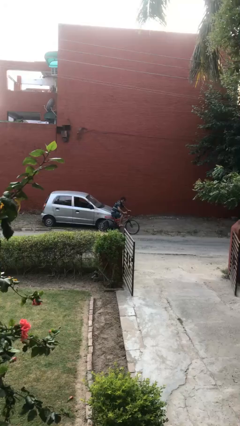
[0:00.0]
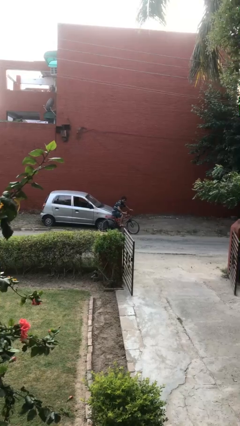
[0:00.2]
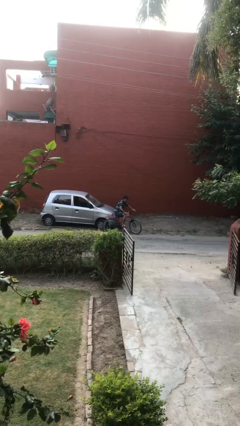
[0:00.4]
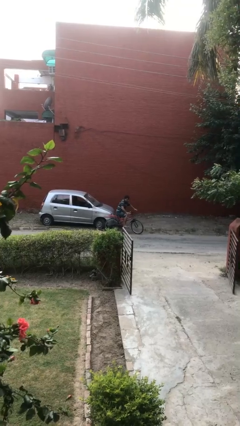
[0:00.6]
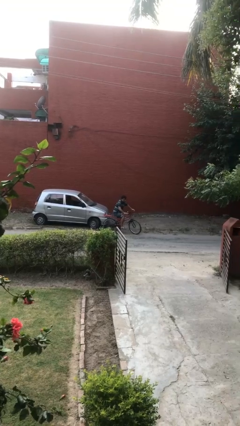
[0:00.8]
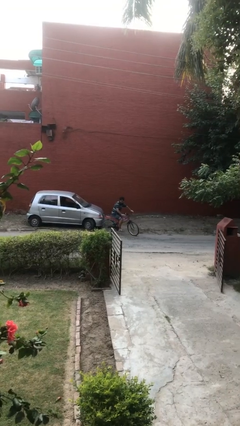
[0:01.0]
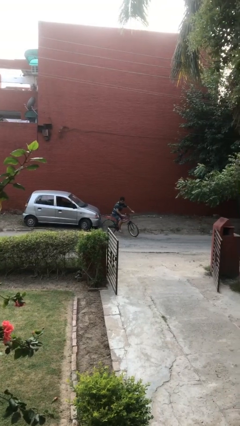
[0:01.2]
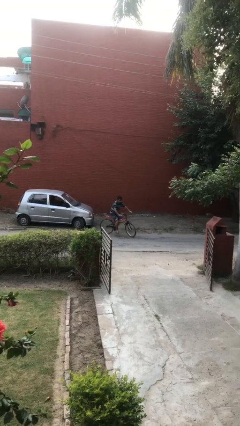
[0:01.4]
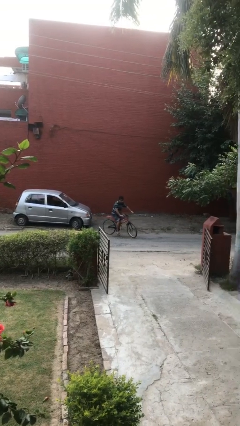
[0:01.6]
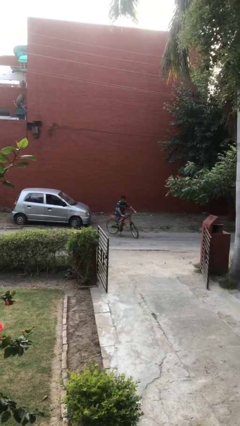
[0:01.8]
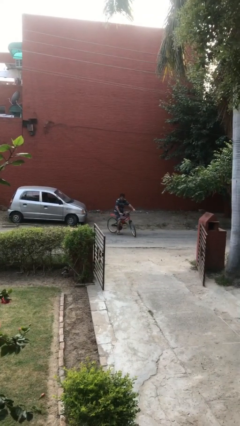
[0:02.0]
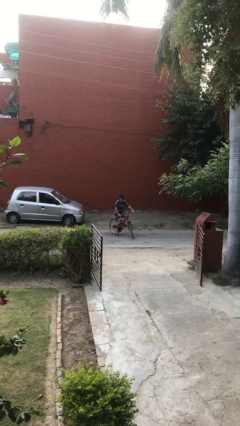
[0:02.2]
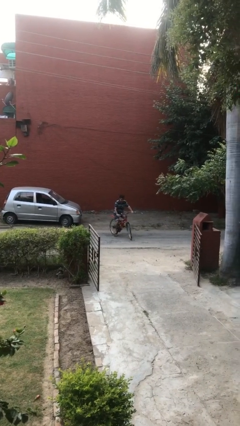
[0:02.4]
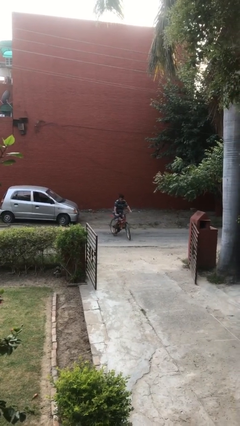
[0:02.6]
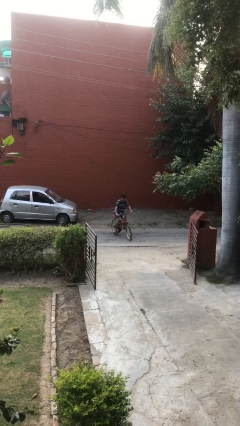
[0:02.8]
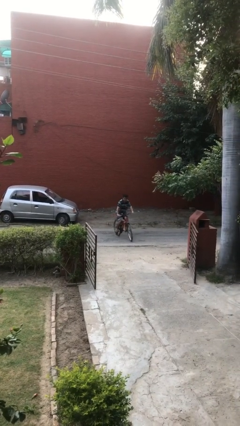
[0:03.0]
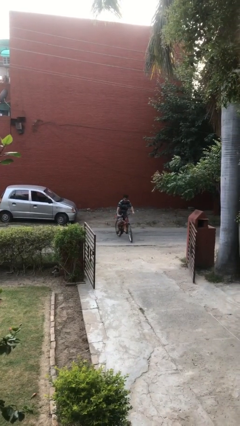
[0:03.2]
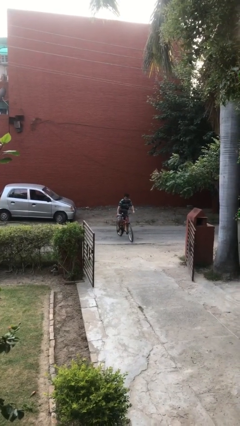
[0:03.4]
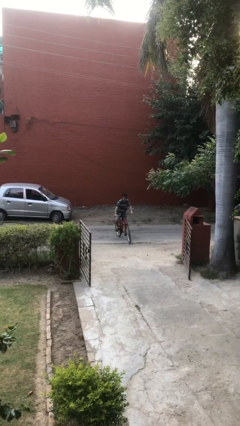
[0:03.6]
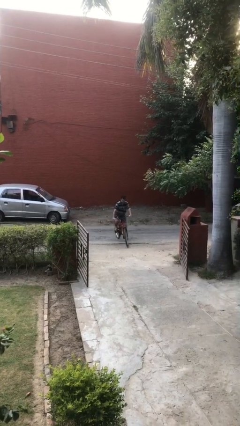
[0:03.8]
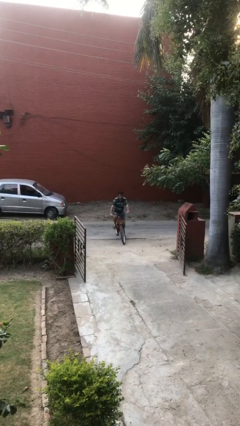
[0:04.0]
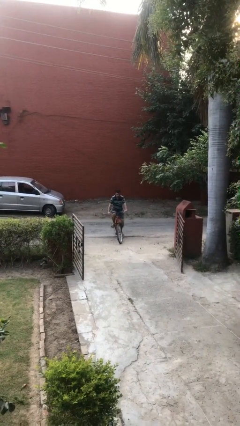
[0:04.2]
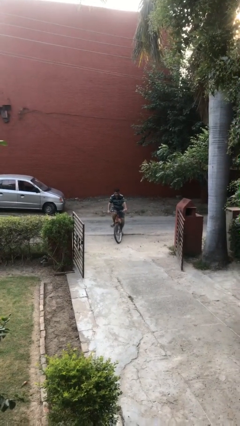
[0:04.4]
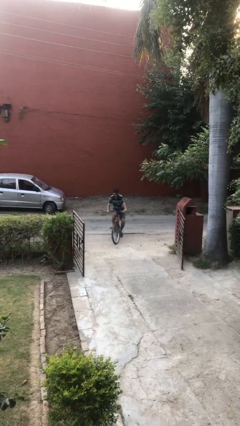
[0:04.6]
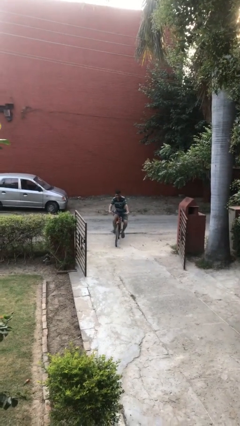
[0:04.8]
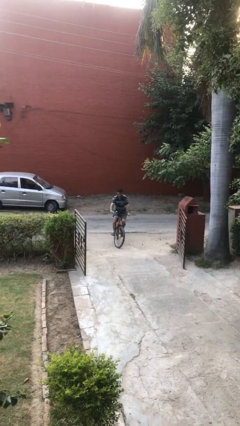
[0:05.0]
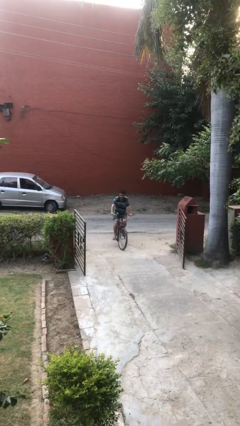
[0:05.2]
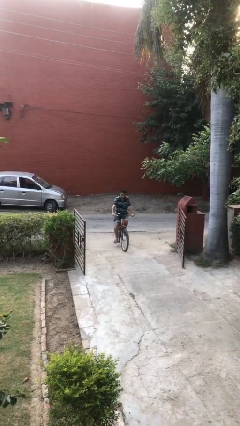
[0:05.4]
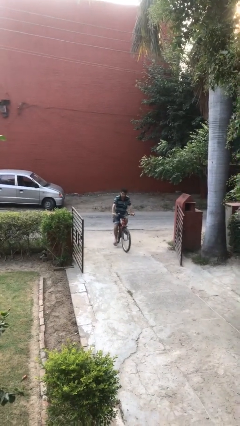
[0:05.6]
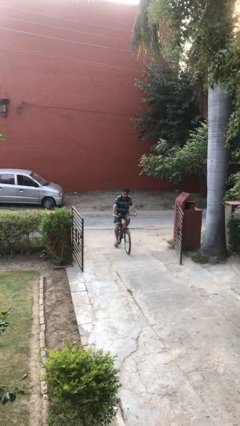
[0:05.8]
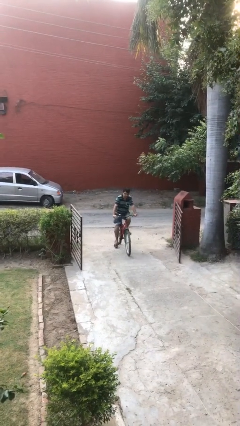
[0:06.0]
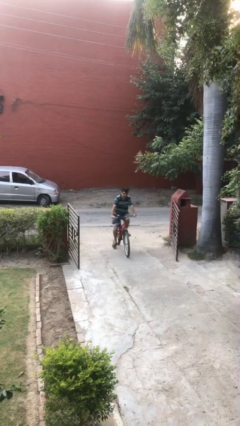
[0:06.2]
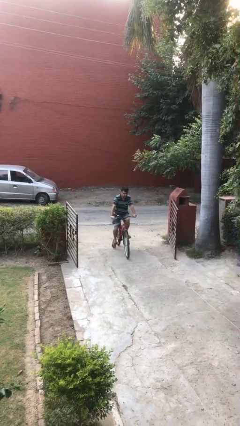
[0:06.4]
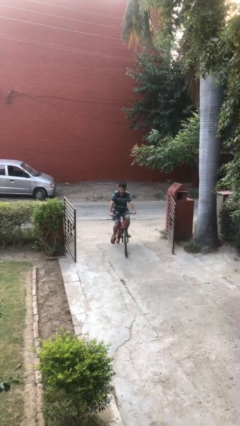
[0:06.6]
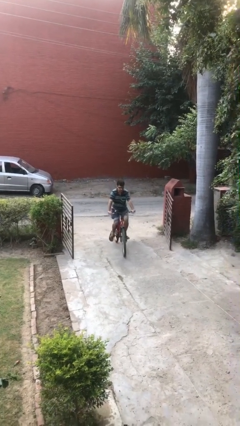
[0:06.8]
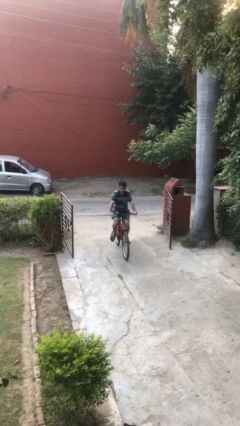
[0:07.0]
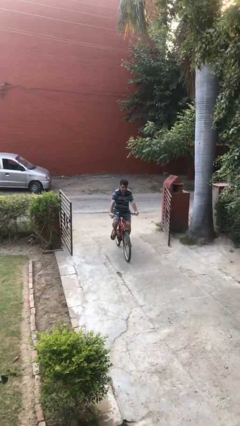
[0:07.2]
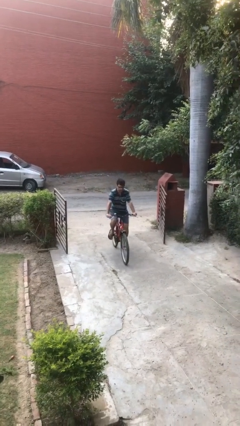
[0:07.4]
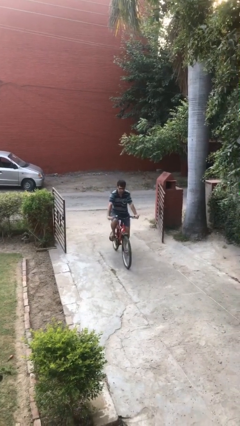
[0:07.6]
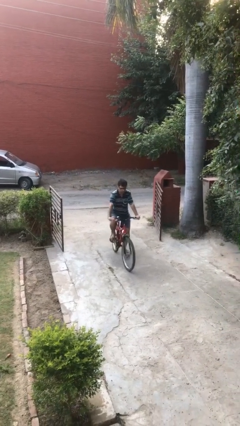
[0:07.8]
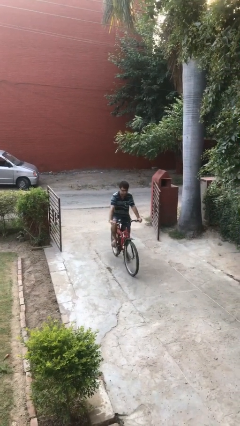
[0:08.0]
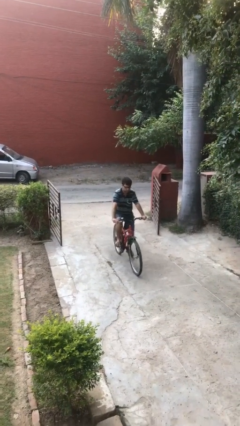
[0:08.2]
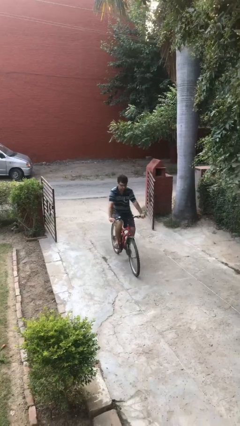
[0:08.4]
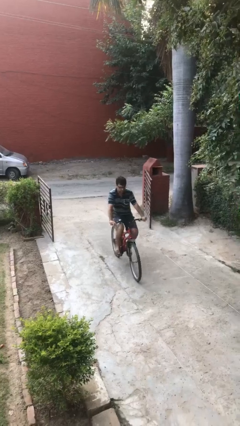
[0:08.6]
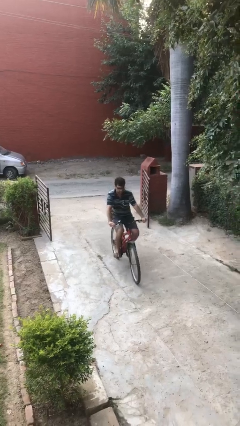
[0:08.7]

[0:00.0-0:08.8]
person rides bicycle

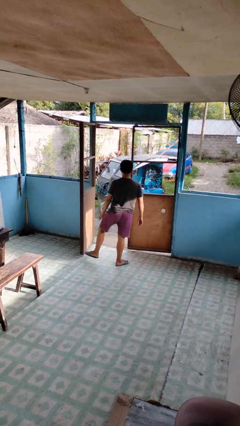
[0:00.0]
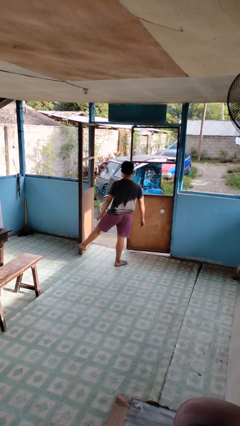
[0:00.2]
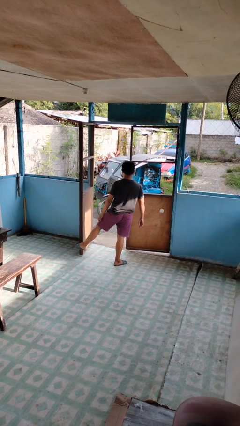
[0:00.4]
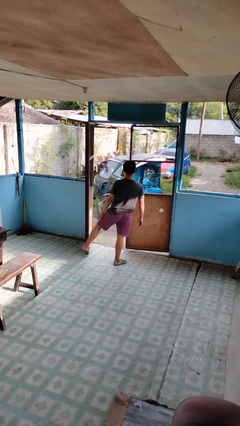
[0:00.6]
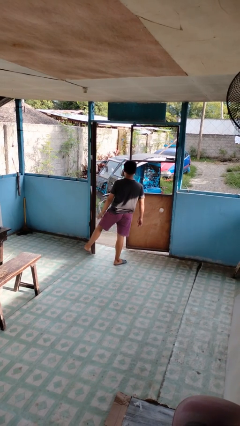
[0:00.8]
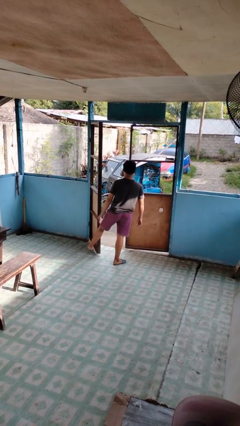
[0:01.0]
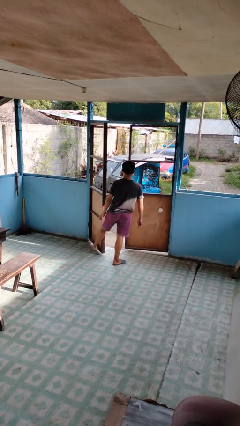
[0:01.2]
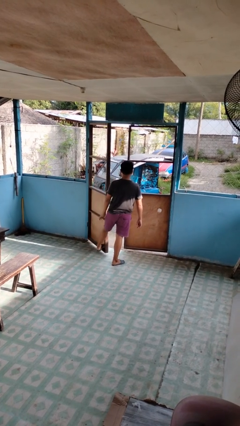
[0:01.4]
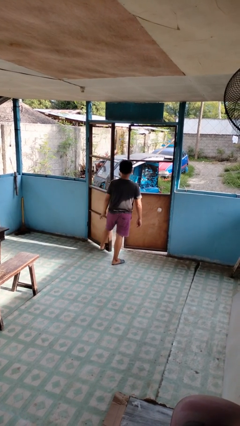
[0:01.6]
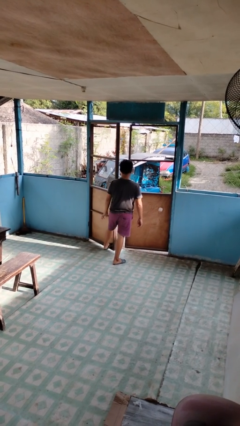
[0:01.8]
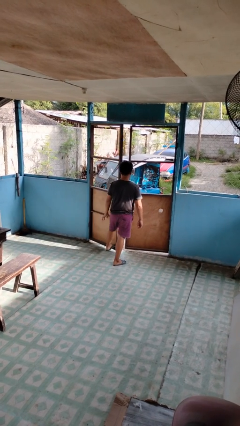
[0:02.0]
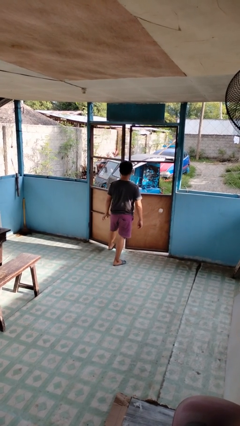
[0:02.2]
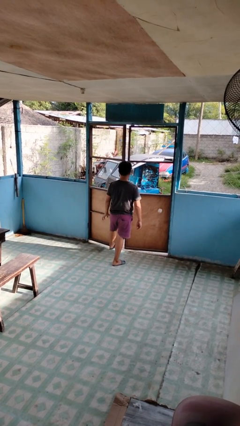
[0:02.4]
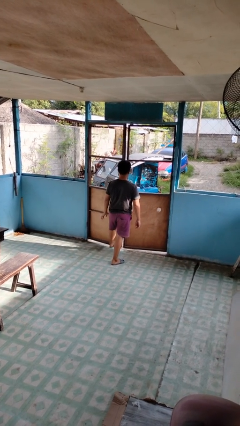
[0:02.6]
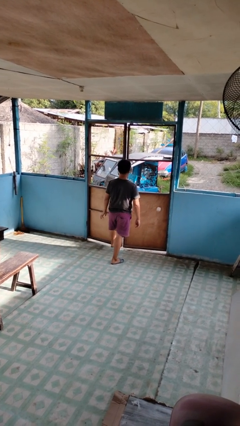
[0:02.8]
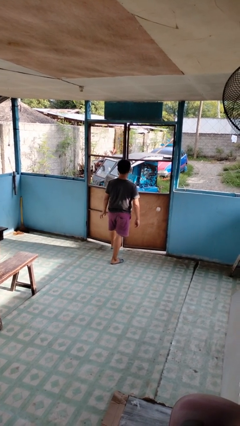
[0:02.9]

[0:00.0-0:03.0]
person closes door with foot

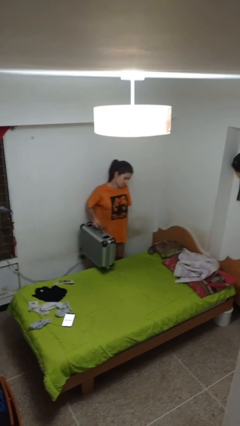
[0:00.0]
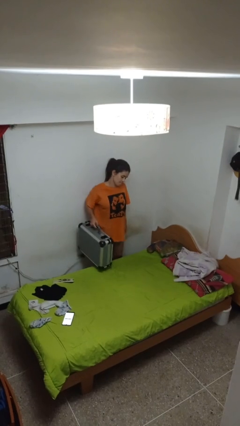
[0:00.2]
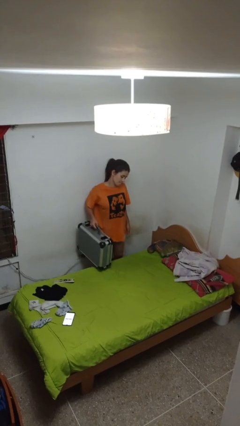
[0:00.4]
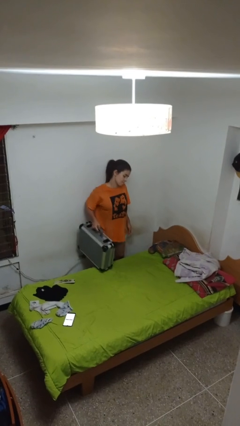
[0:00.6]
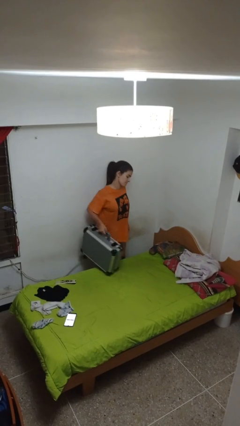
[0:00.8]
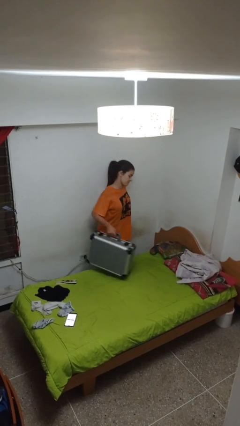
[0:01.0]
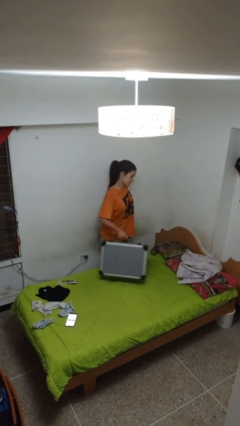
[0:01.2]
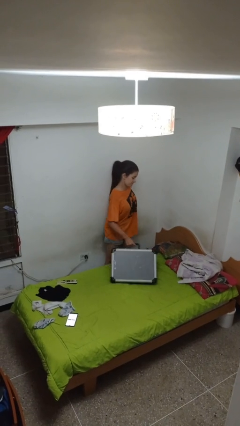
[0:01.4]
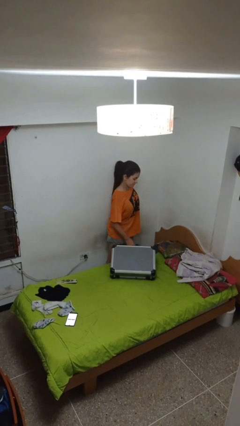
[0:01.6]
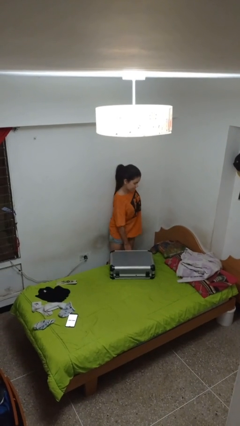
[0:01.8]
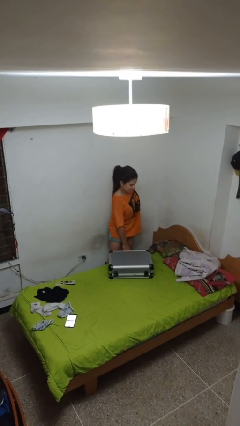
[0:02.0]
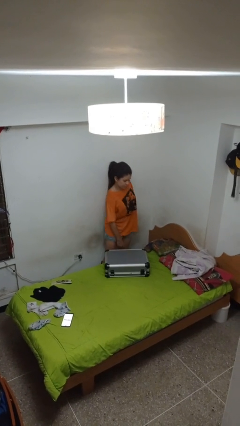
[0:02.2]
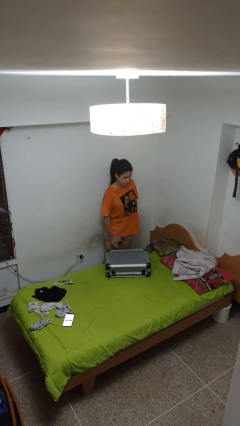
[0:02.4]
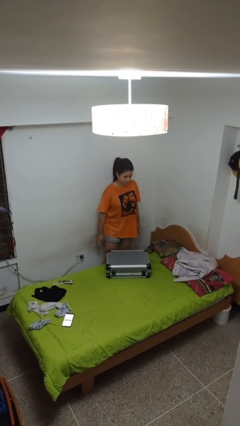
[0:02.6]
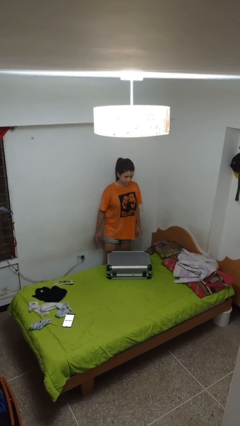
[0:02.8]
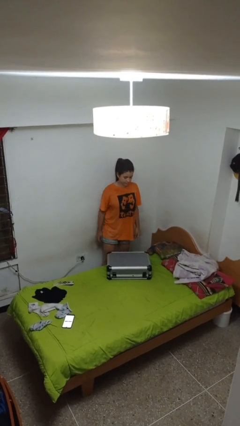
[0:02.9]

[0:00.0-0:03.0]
person puts down object on bed

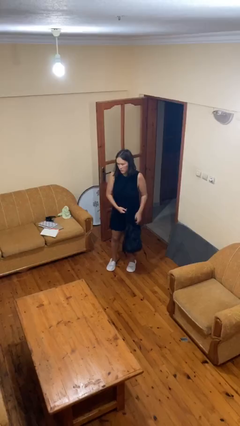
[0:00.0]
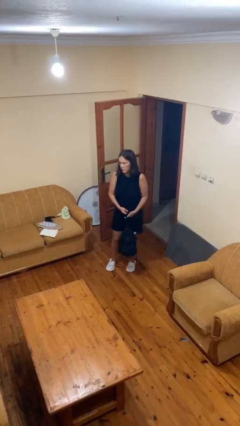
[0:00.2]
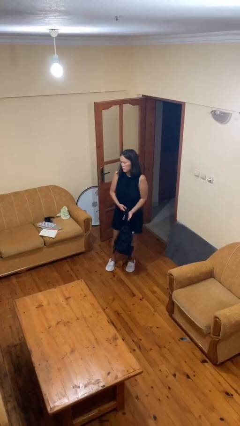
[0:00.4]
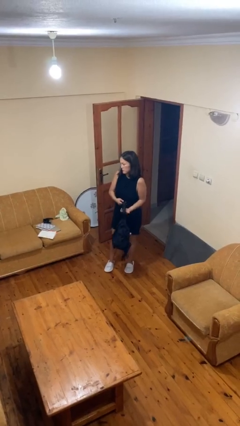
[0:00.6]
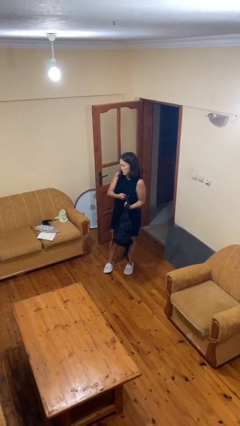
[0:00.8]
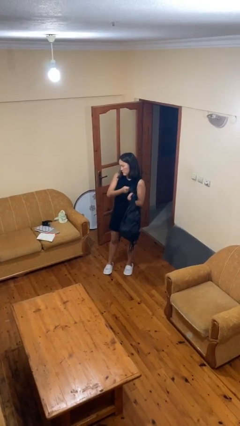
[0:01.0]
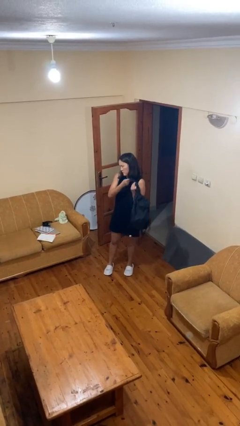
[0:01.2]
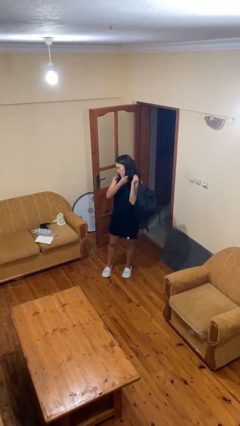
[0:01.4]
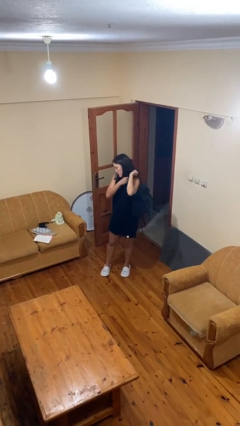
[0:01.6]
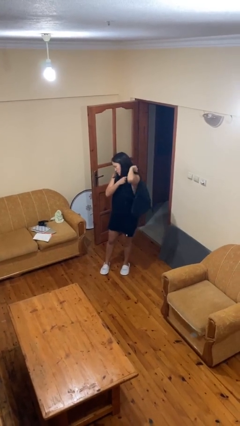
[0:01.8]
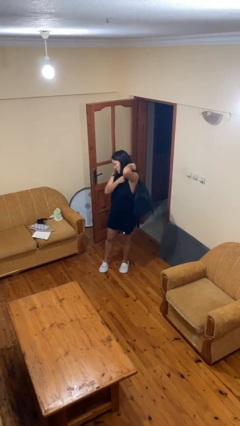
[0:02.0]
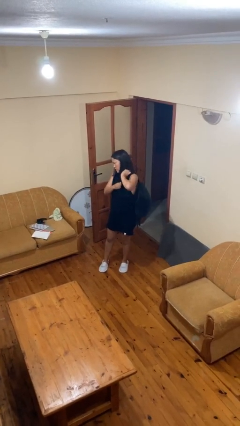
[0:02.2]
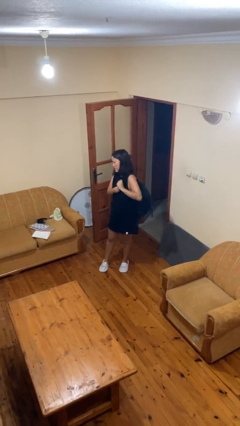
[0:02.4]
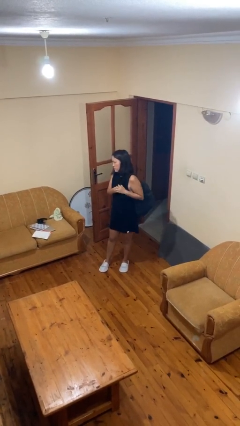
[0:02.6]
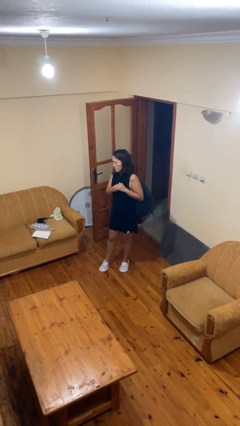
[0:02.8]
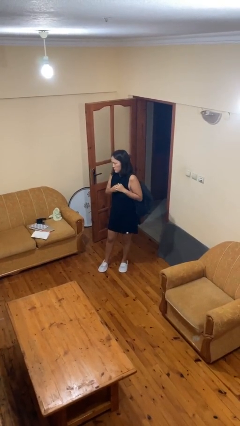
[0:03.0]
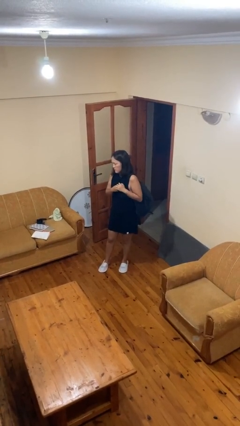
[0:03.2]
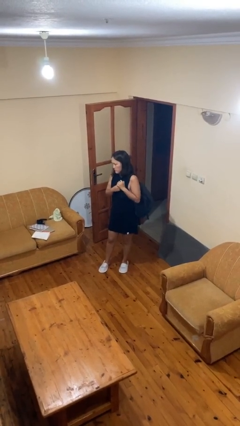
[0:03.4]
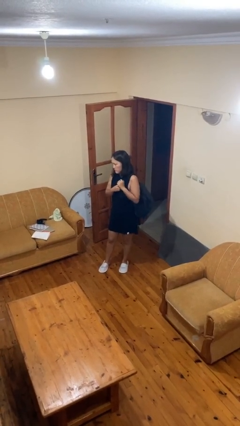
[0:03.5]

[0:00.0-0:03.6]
person puts on backpack
